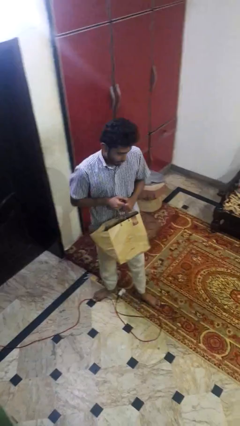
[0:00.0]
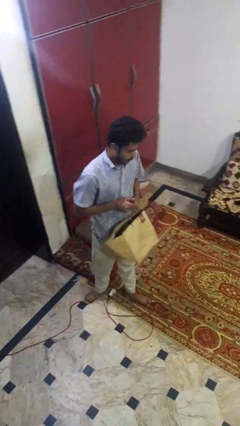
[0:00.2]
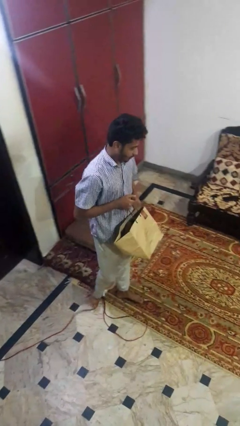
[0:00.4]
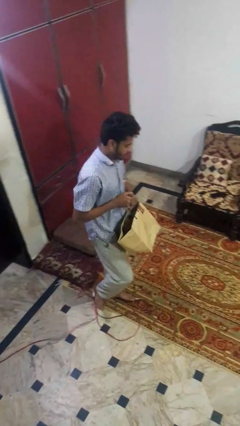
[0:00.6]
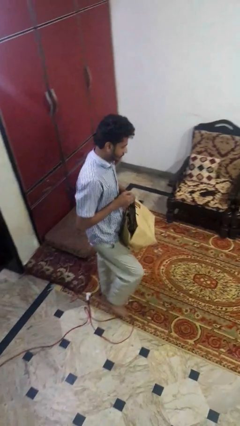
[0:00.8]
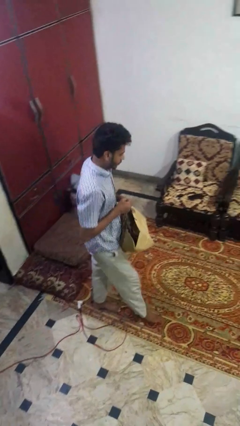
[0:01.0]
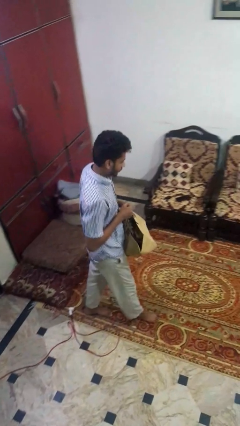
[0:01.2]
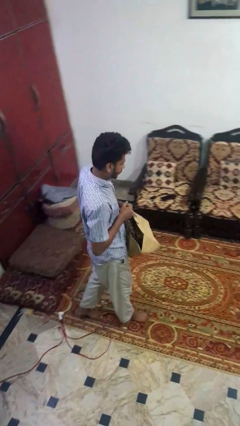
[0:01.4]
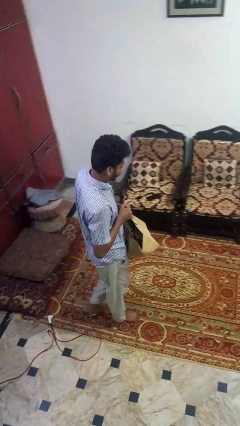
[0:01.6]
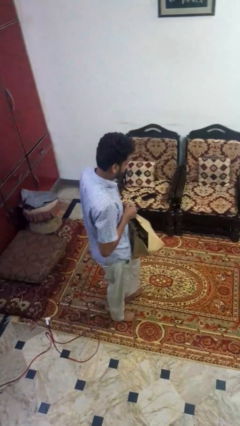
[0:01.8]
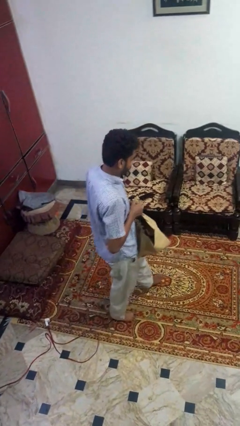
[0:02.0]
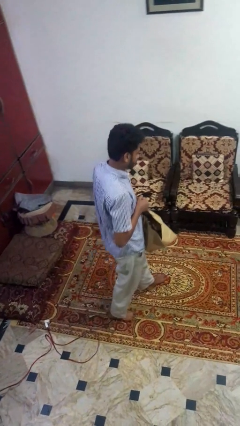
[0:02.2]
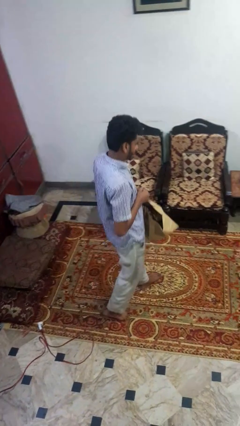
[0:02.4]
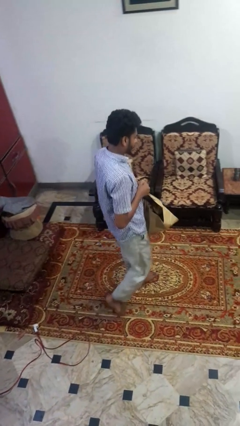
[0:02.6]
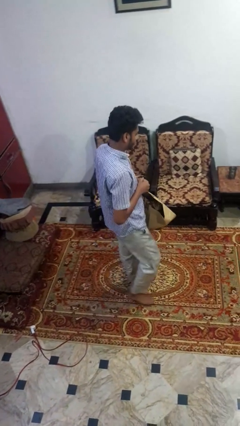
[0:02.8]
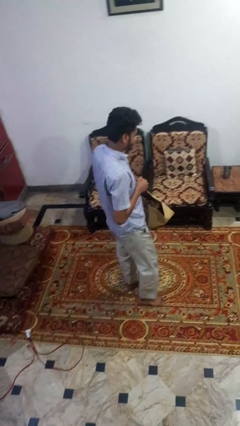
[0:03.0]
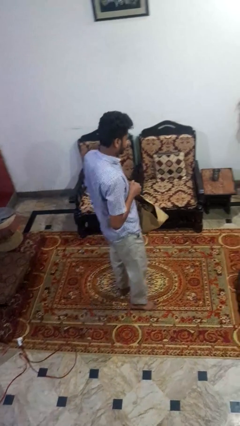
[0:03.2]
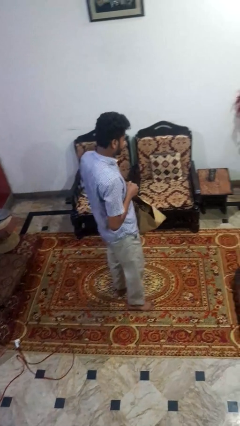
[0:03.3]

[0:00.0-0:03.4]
person carries groceries

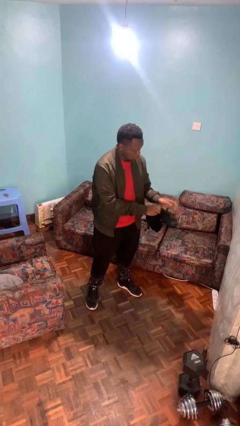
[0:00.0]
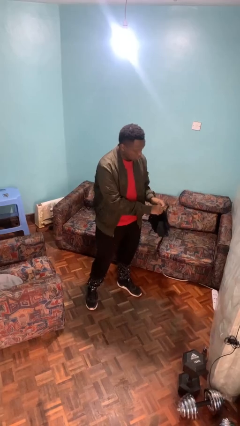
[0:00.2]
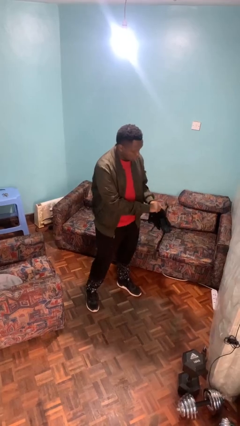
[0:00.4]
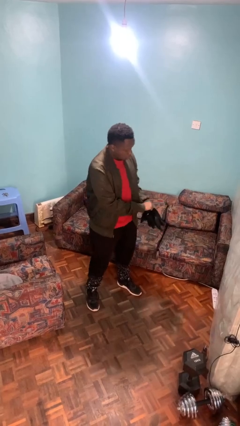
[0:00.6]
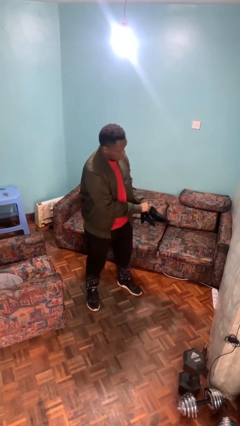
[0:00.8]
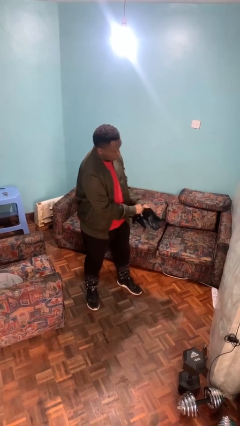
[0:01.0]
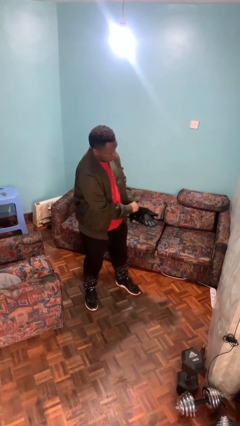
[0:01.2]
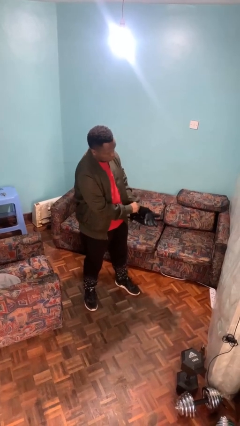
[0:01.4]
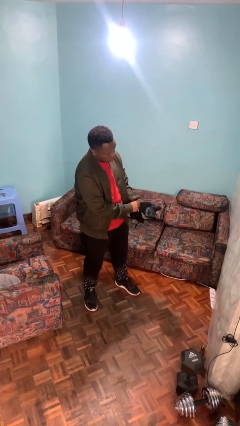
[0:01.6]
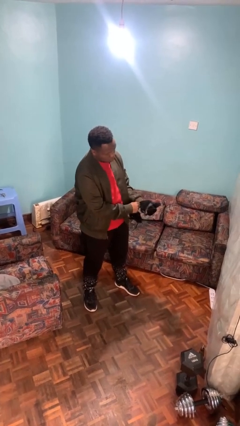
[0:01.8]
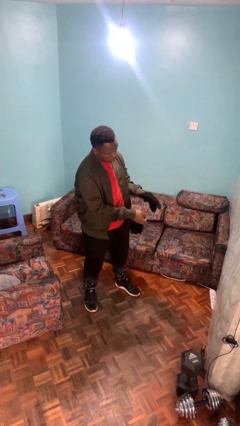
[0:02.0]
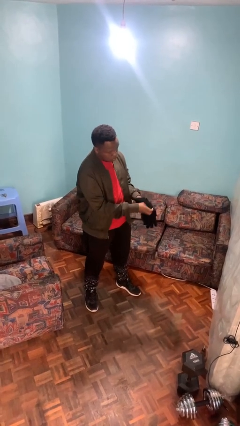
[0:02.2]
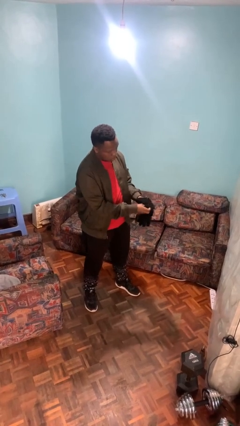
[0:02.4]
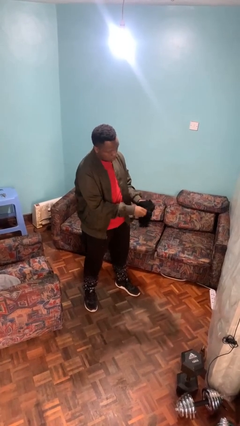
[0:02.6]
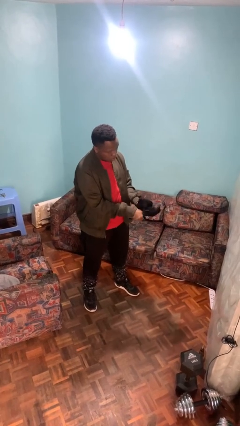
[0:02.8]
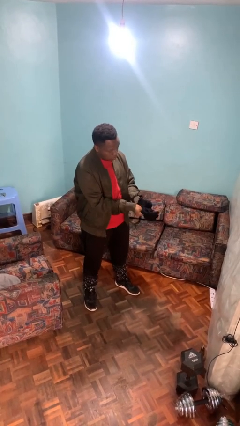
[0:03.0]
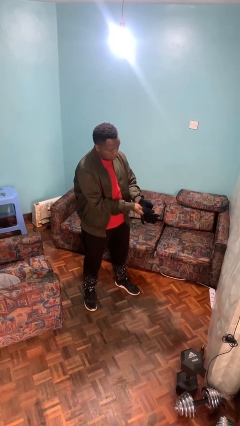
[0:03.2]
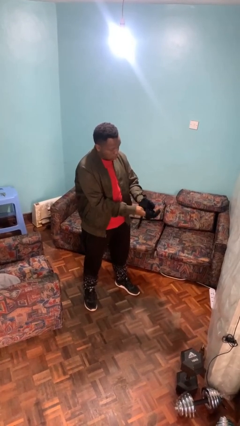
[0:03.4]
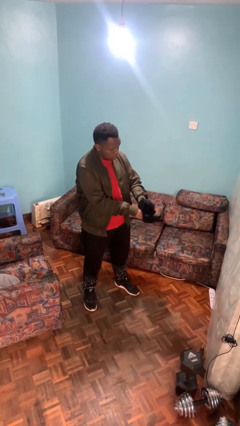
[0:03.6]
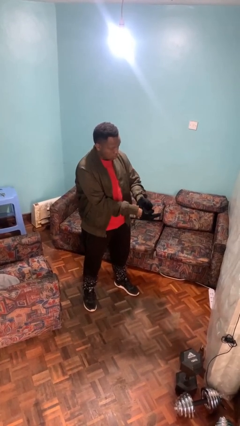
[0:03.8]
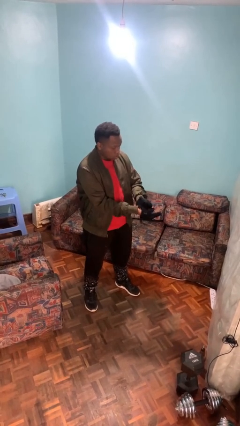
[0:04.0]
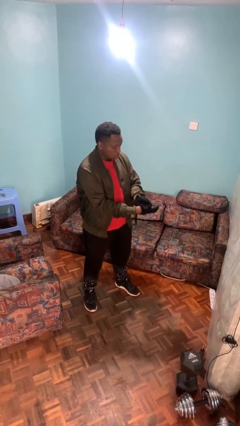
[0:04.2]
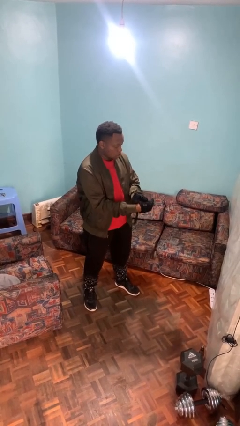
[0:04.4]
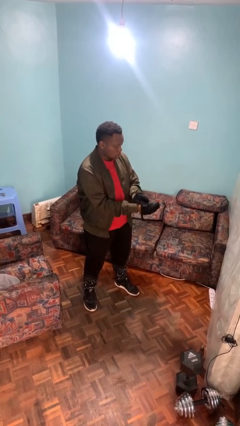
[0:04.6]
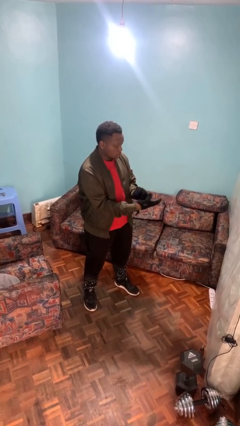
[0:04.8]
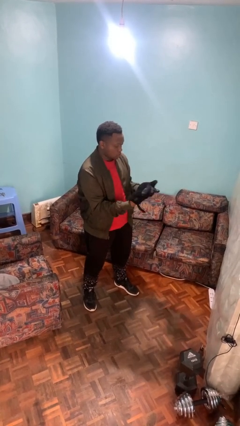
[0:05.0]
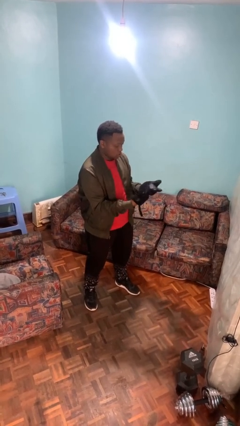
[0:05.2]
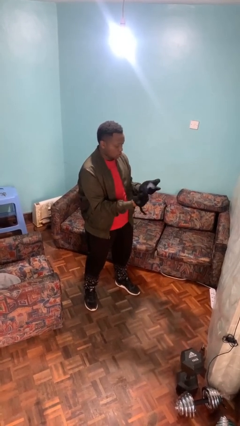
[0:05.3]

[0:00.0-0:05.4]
person puts on gloves

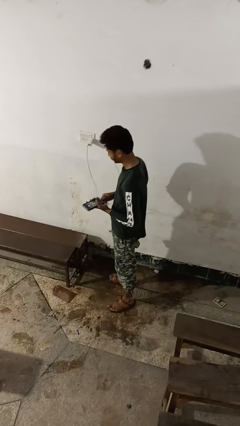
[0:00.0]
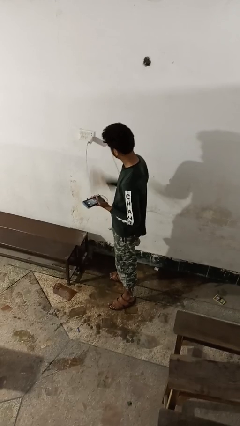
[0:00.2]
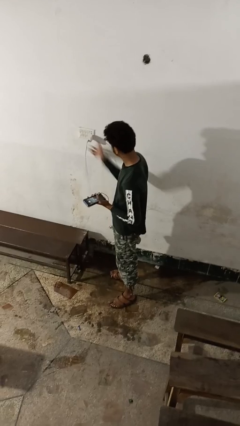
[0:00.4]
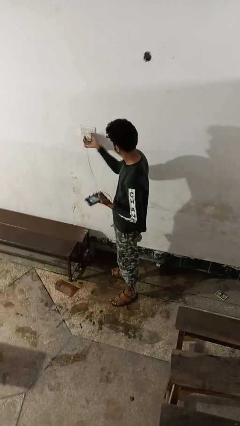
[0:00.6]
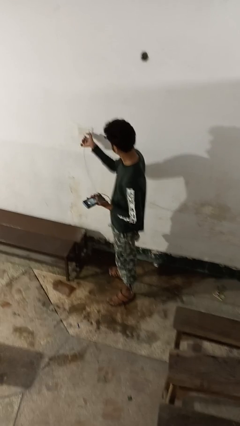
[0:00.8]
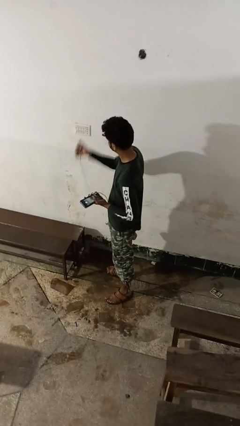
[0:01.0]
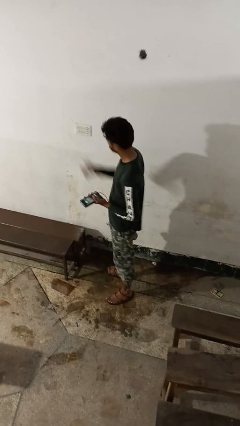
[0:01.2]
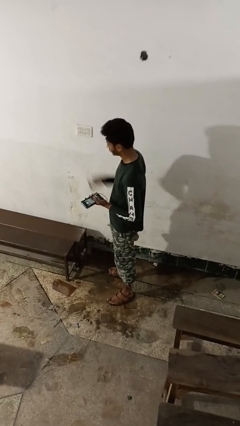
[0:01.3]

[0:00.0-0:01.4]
person unplugs from electrical socket

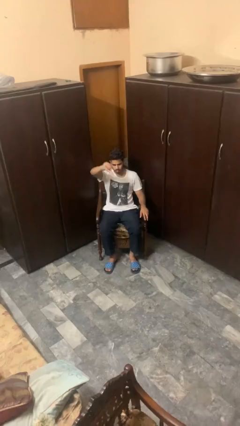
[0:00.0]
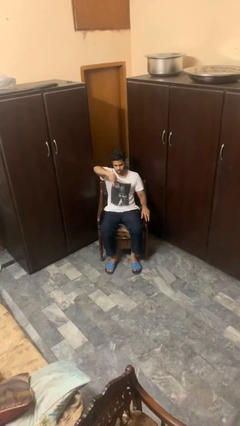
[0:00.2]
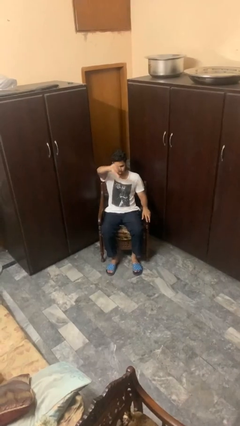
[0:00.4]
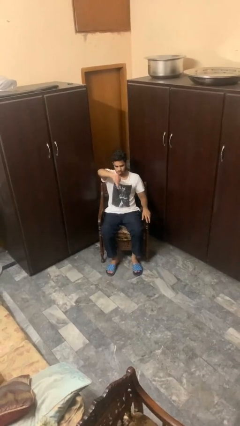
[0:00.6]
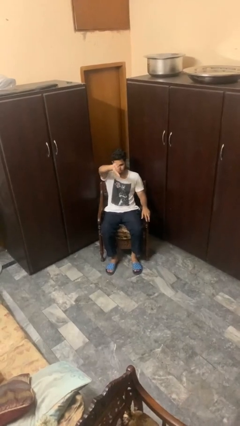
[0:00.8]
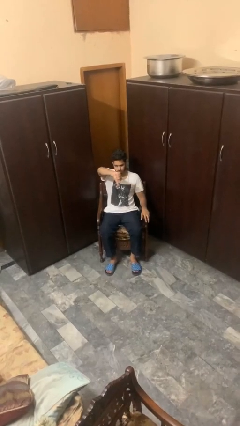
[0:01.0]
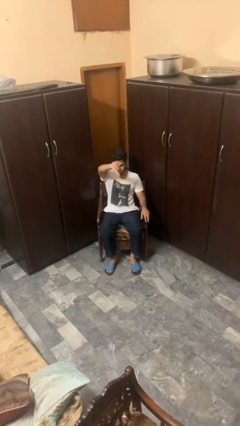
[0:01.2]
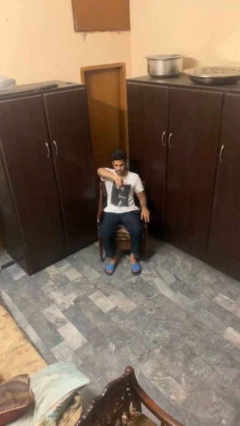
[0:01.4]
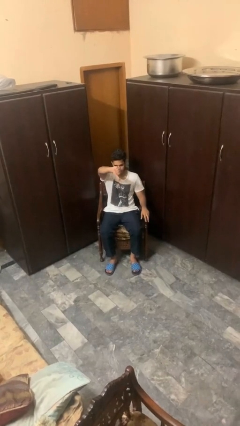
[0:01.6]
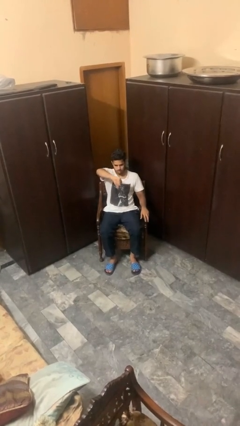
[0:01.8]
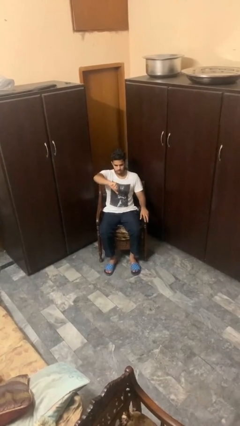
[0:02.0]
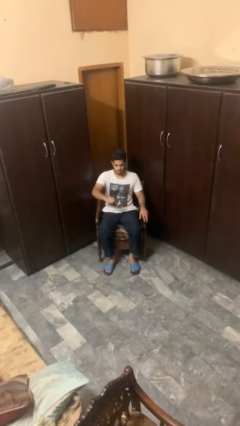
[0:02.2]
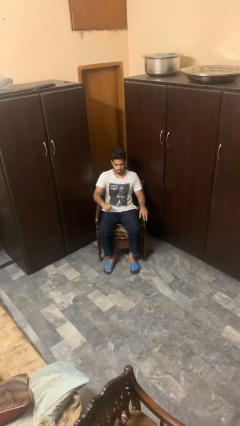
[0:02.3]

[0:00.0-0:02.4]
person gestures thumbs down

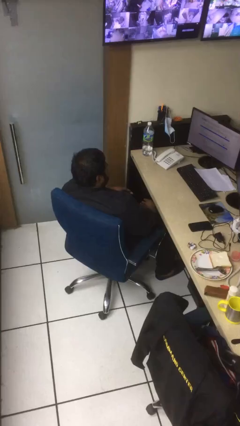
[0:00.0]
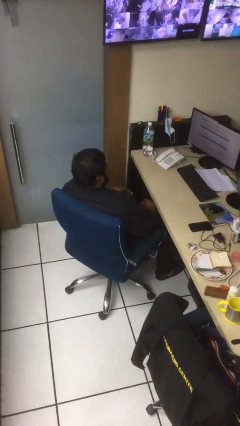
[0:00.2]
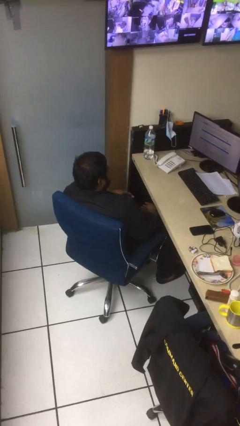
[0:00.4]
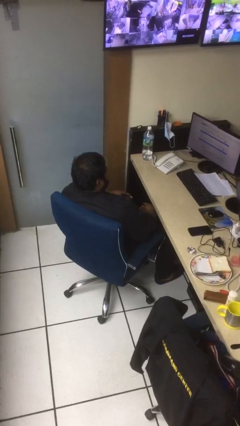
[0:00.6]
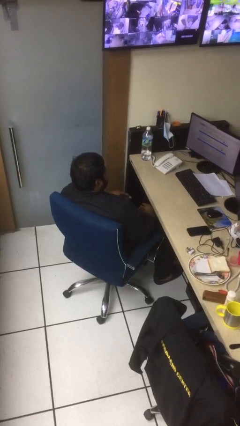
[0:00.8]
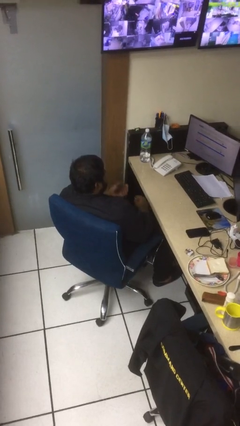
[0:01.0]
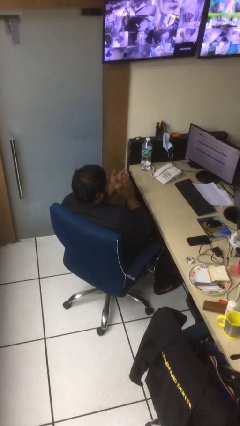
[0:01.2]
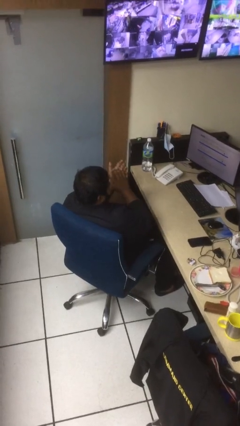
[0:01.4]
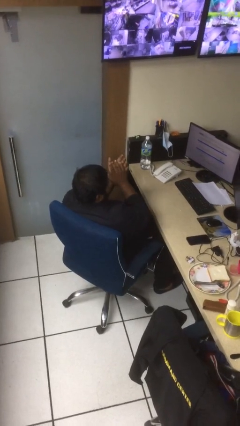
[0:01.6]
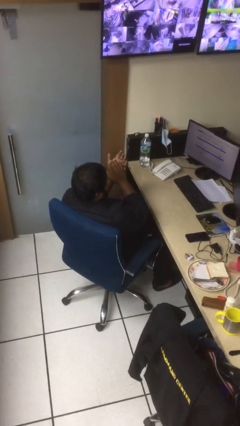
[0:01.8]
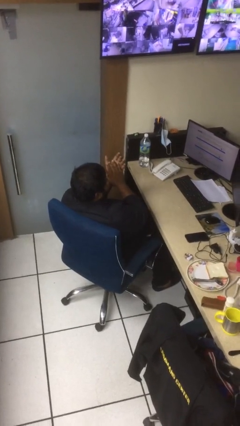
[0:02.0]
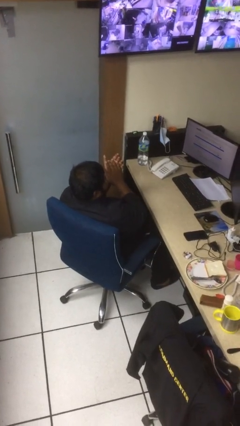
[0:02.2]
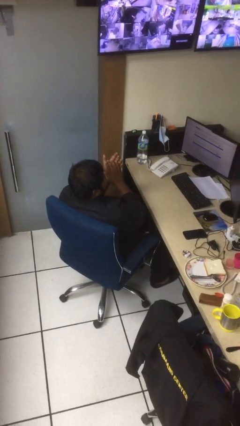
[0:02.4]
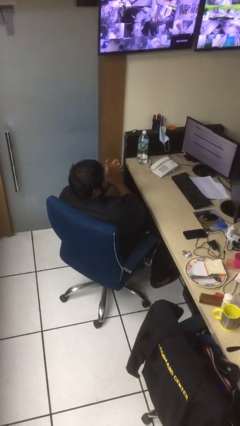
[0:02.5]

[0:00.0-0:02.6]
person claps hands

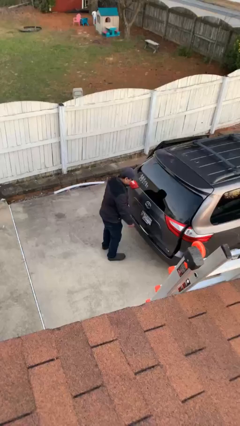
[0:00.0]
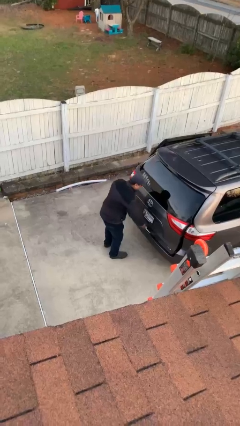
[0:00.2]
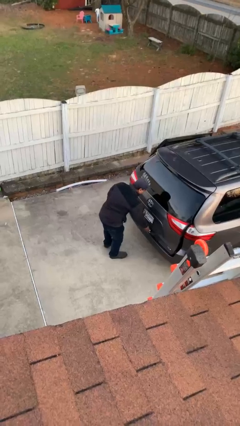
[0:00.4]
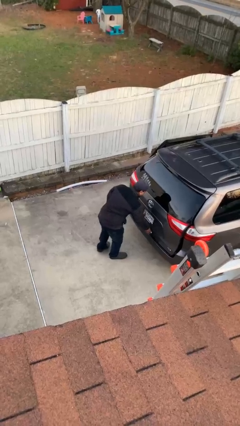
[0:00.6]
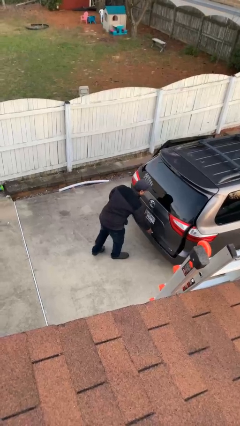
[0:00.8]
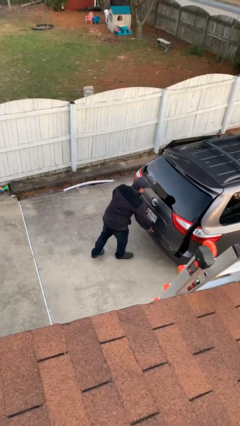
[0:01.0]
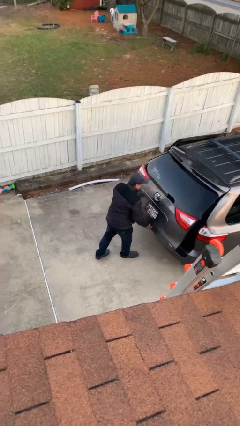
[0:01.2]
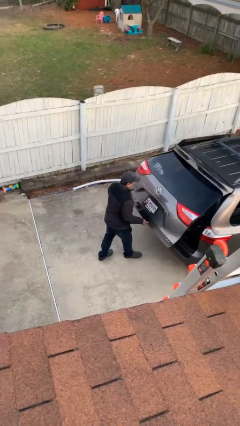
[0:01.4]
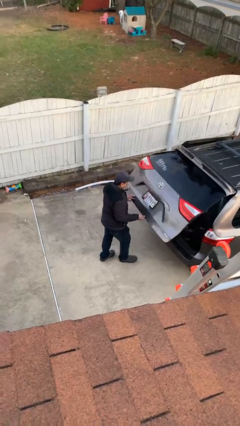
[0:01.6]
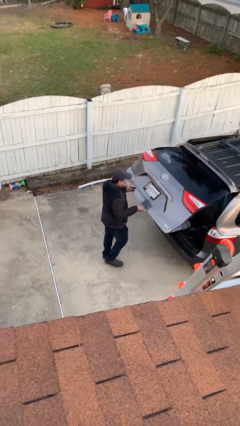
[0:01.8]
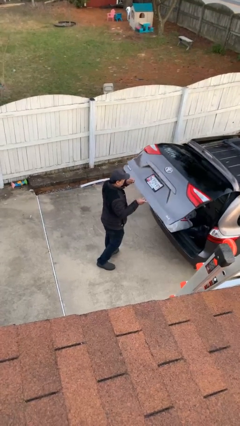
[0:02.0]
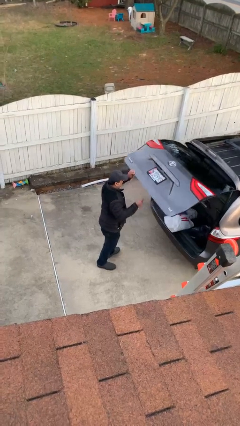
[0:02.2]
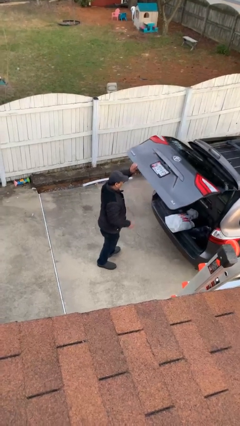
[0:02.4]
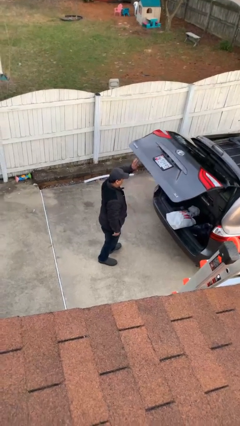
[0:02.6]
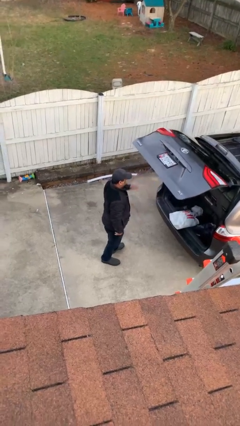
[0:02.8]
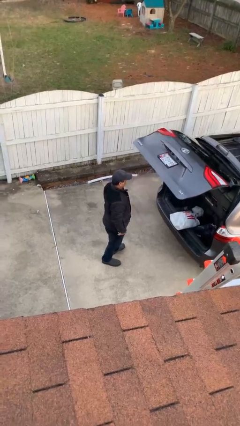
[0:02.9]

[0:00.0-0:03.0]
person opens car trunk
